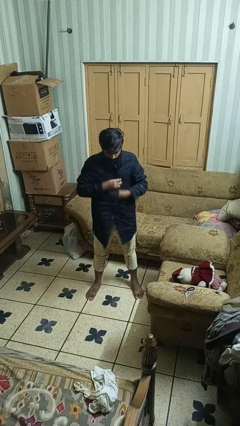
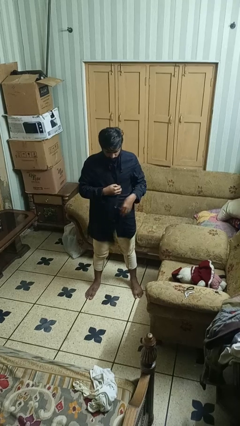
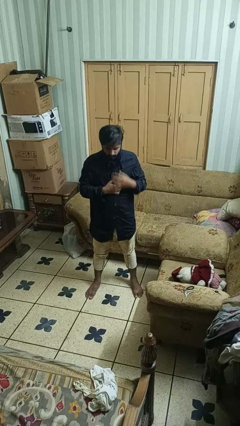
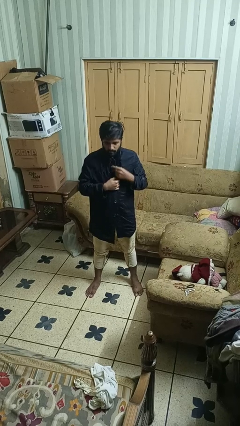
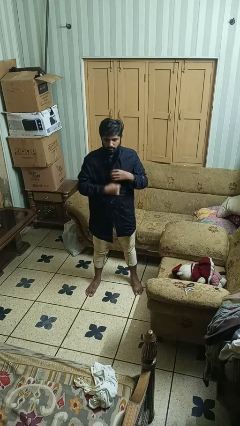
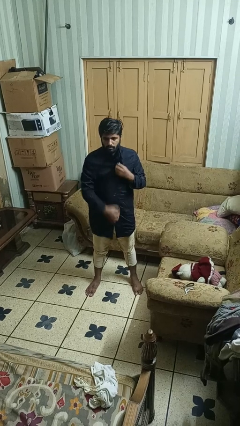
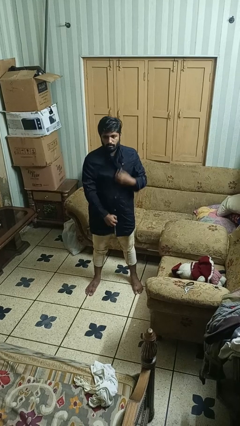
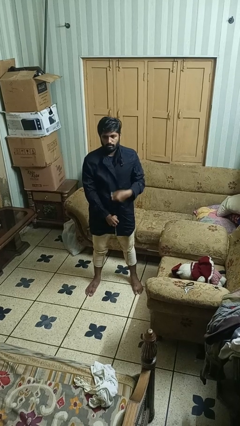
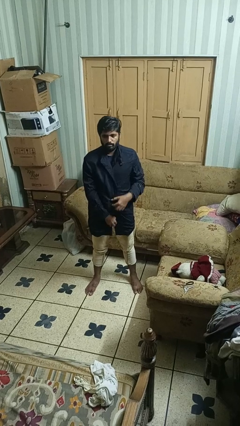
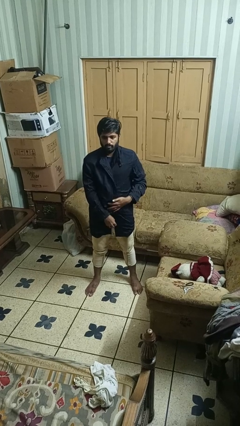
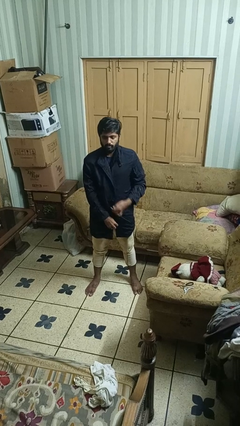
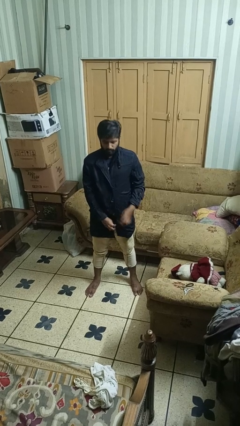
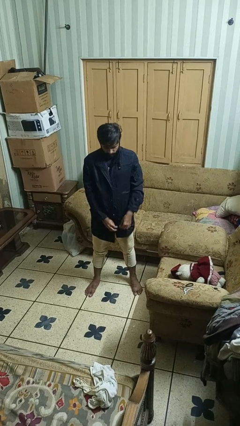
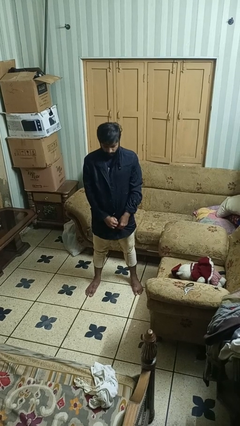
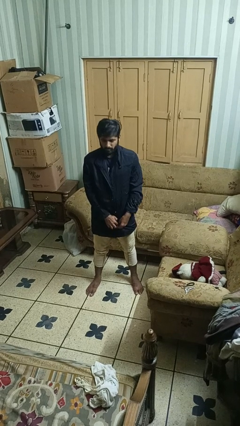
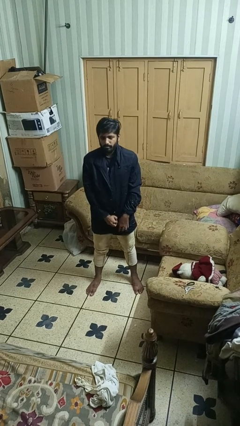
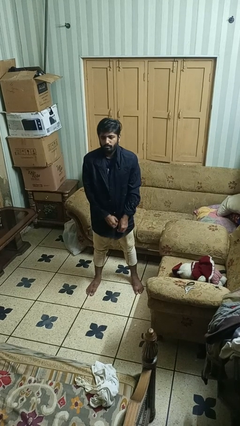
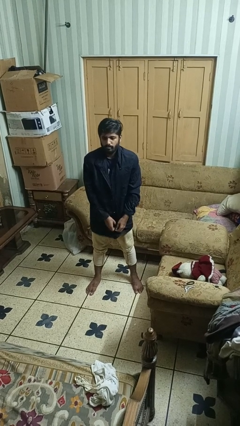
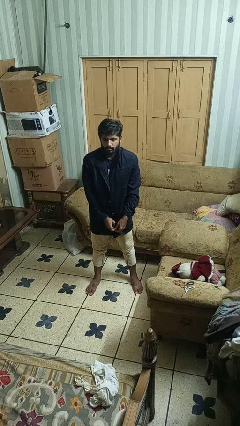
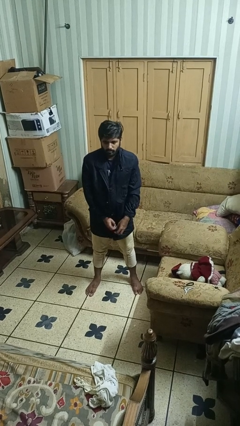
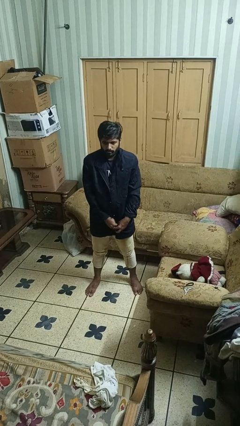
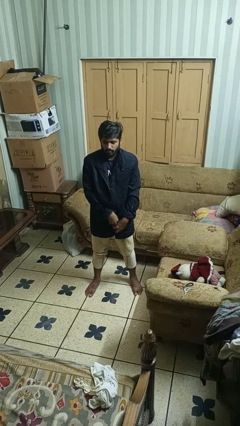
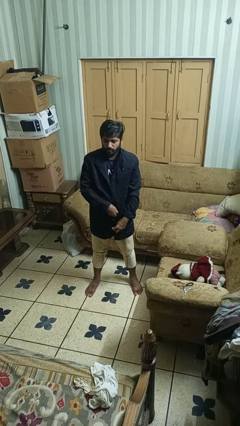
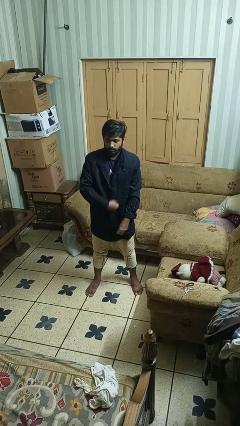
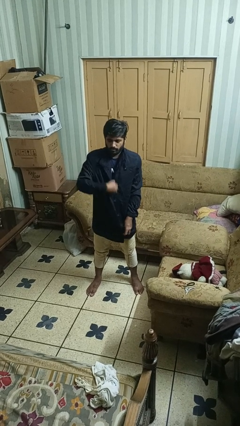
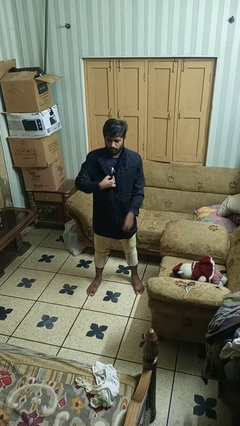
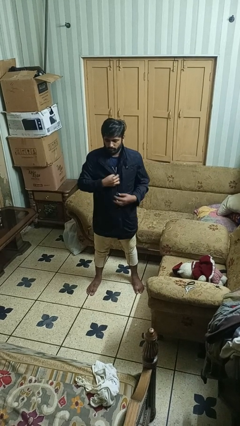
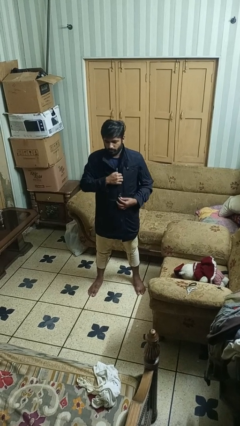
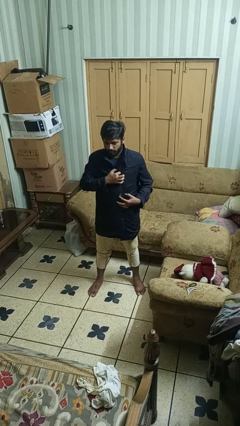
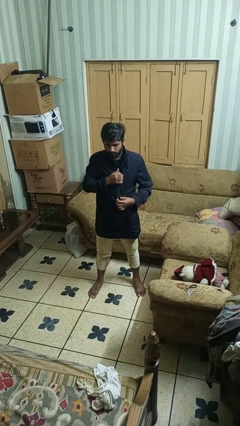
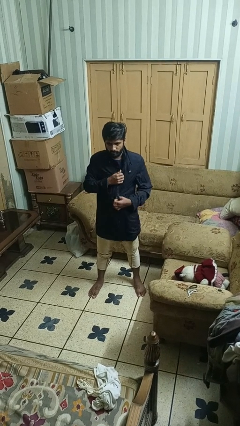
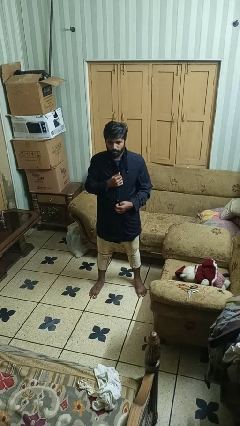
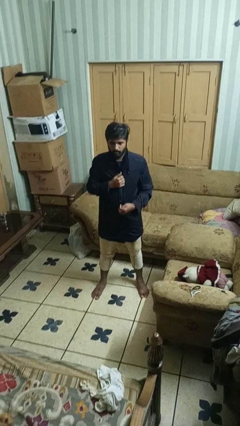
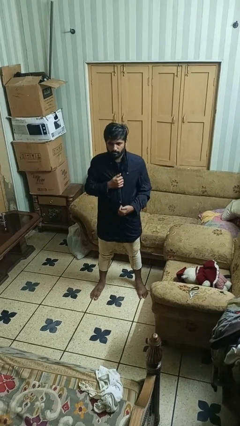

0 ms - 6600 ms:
person zips up jacket

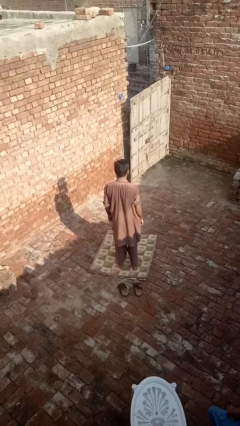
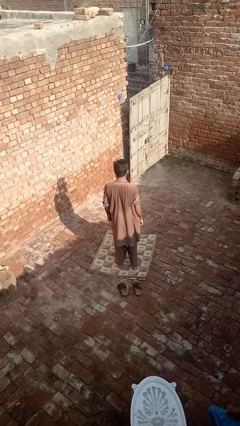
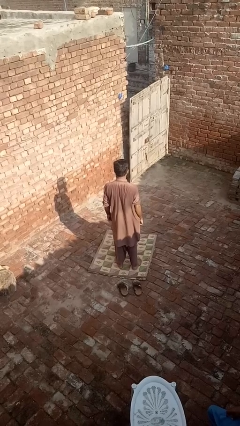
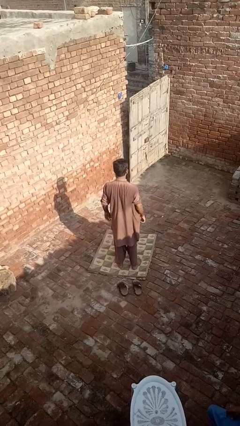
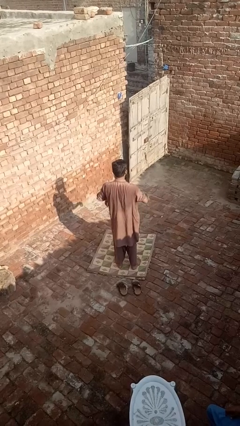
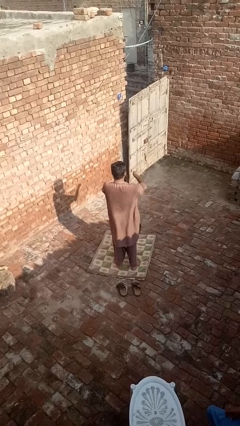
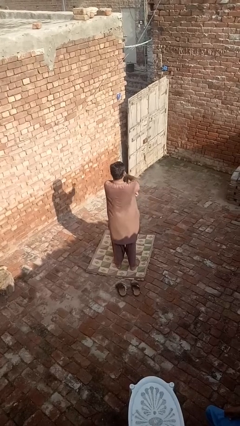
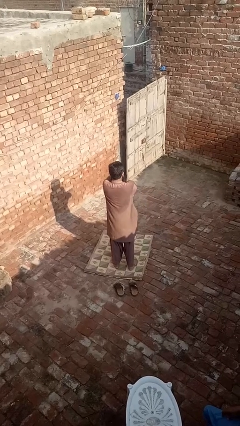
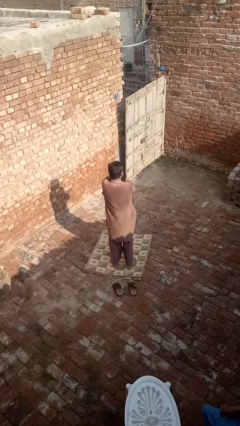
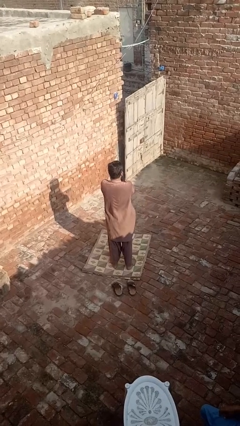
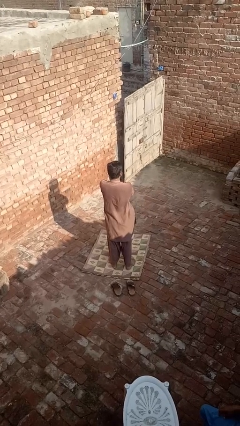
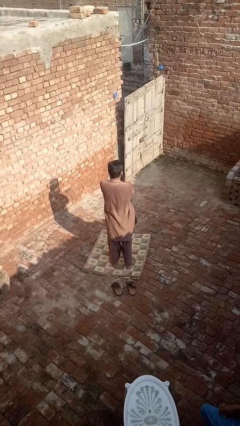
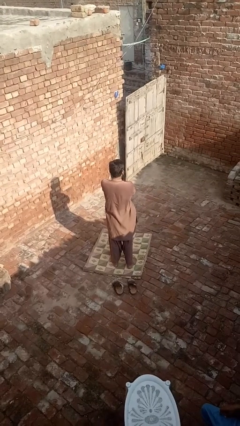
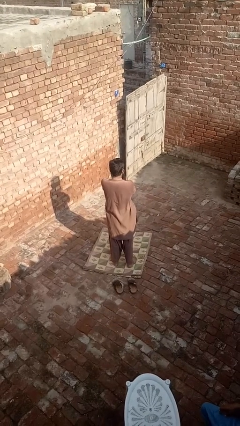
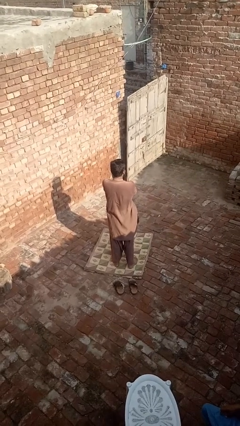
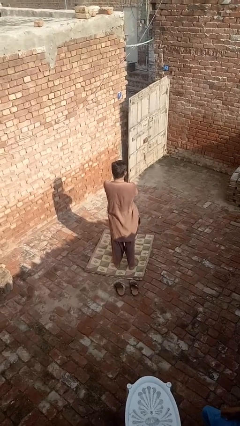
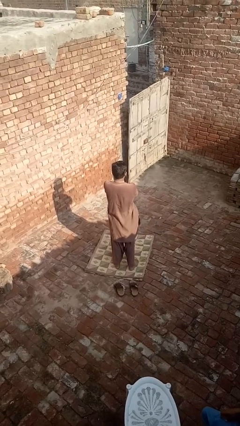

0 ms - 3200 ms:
person crosses arms

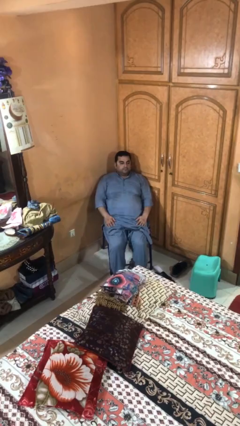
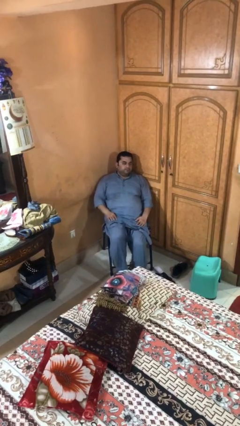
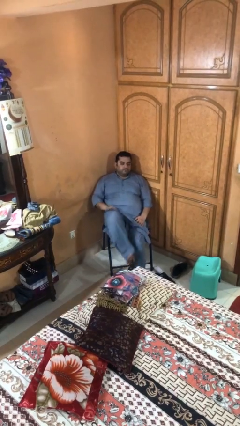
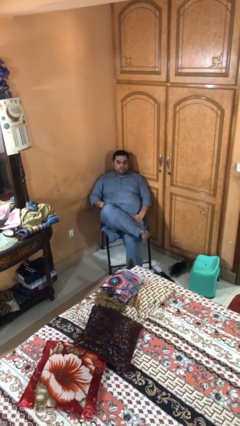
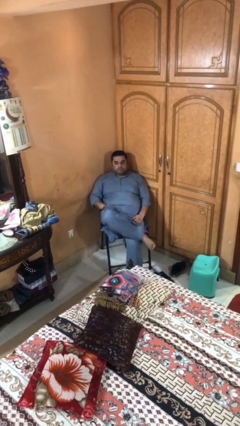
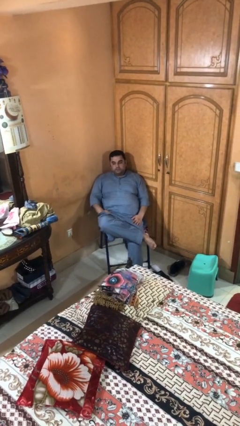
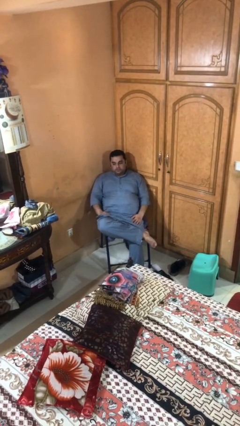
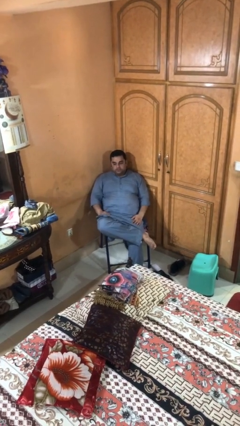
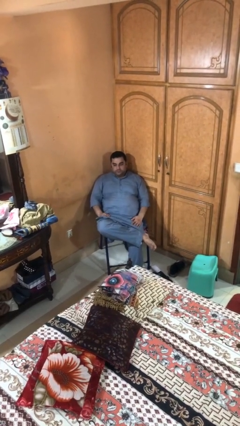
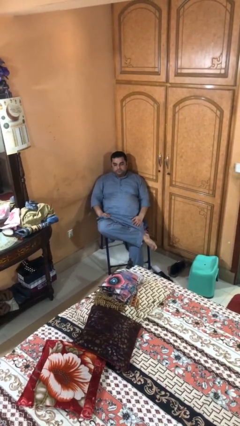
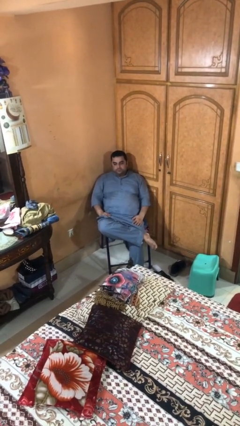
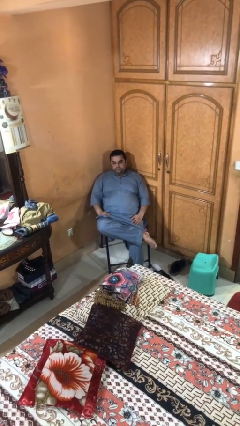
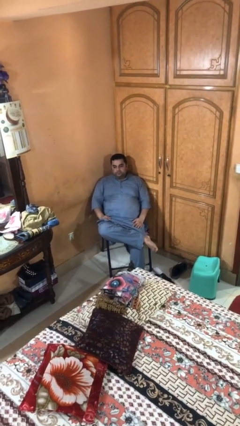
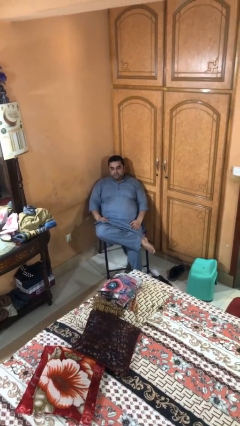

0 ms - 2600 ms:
person crosses legs

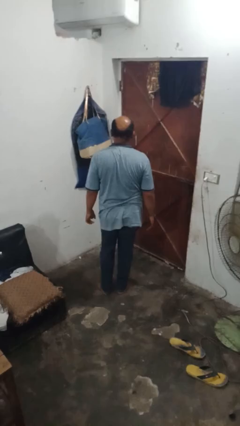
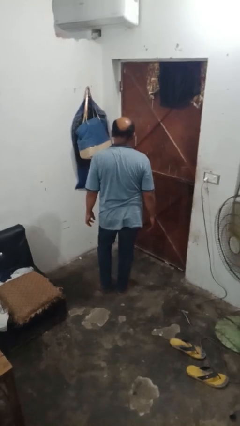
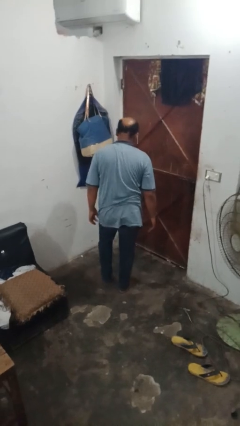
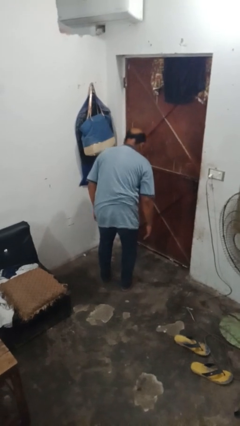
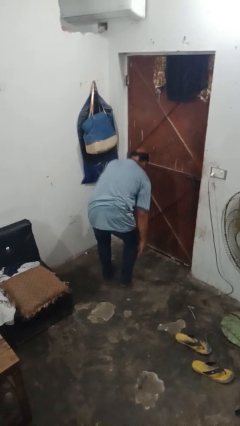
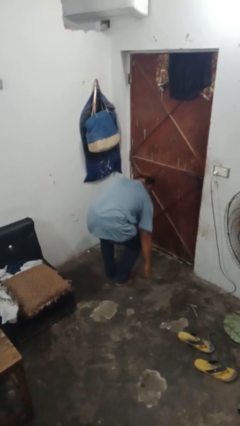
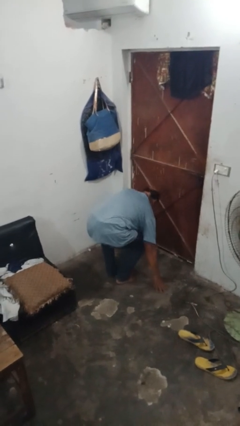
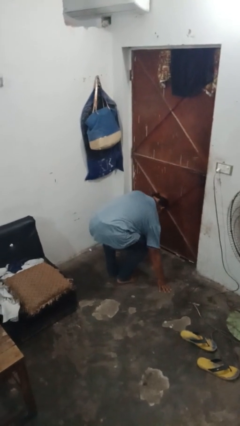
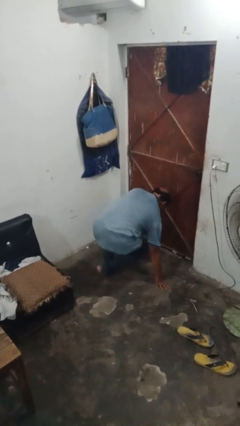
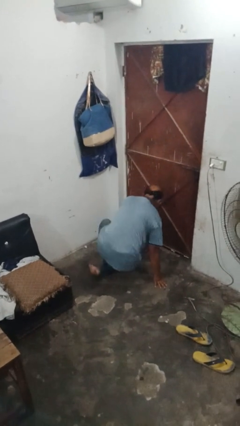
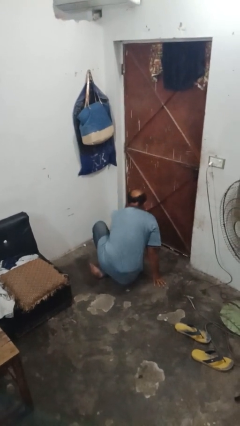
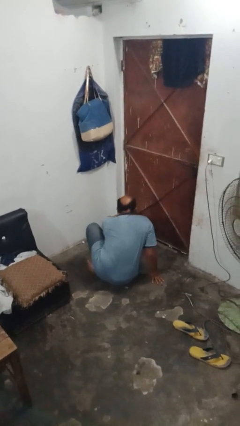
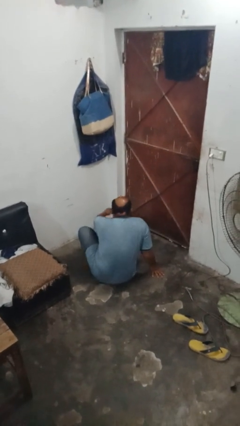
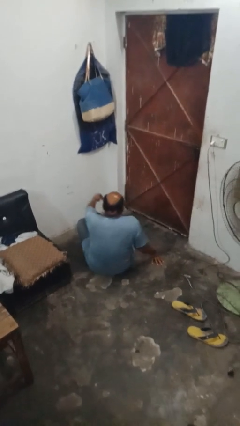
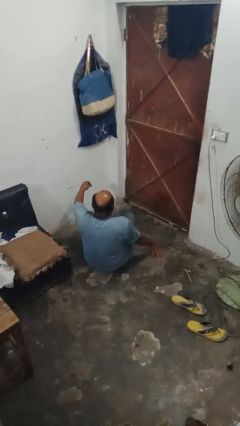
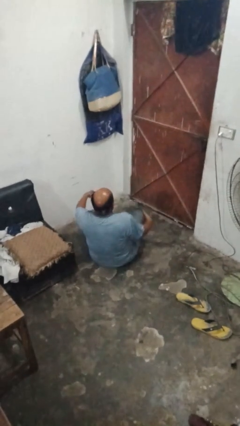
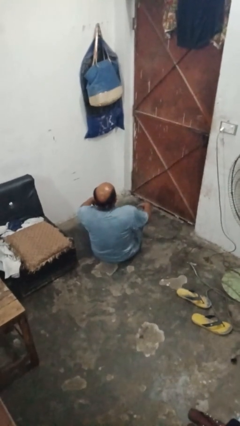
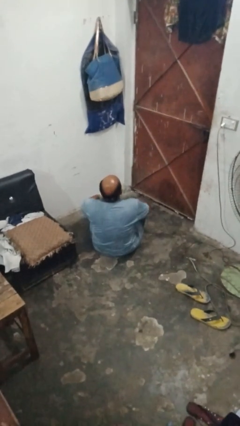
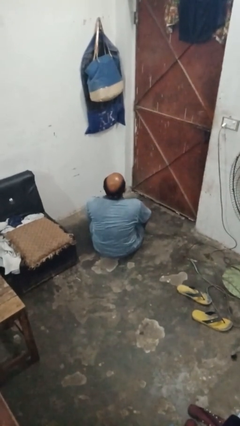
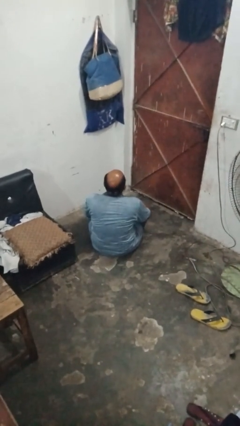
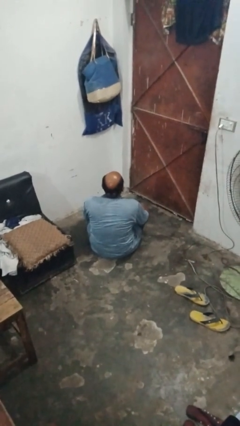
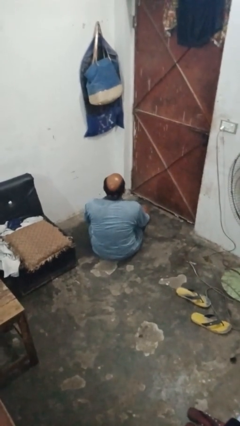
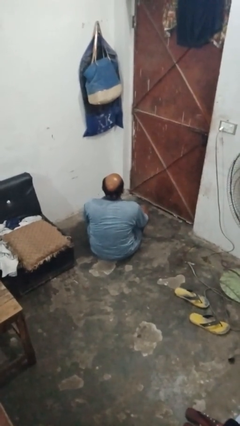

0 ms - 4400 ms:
person sits crisscross

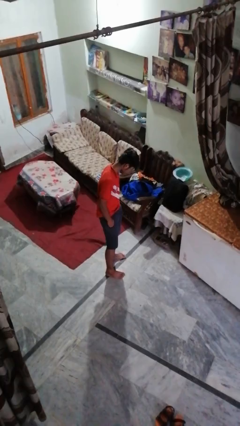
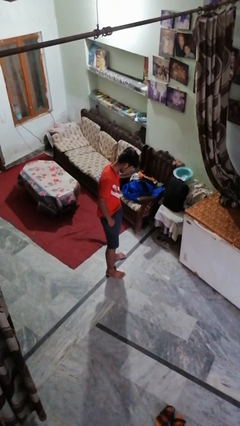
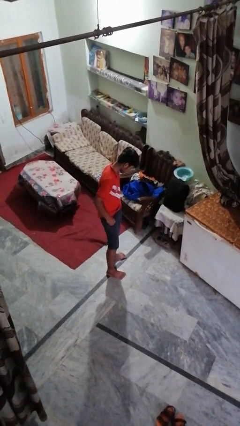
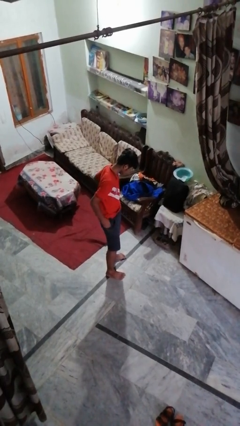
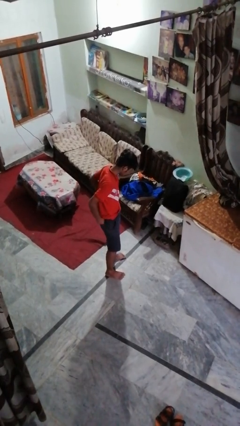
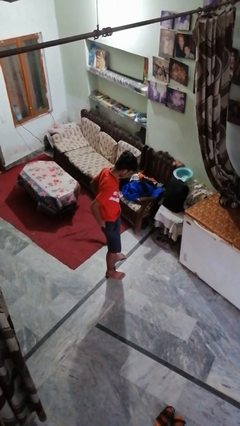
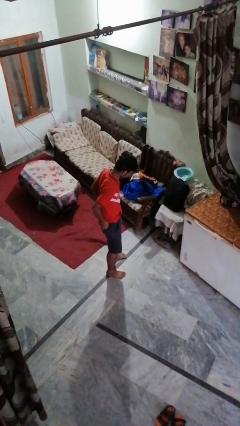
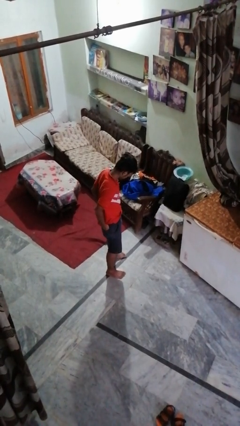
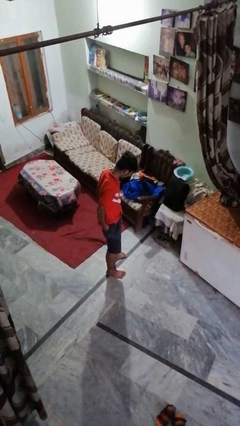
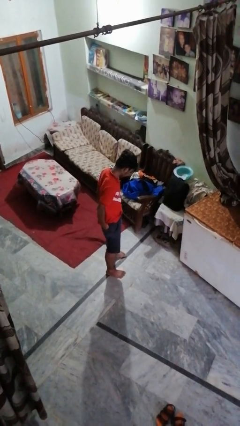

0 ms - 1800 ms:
person puts hands in back pockets
